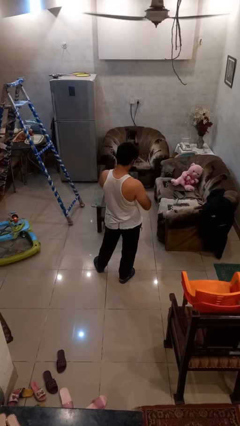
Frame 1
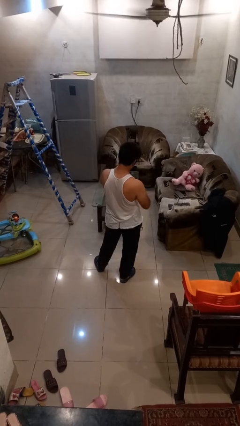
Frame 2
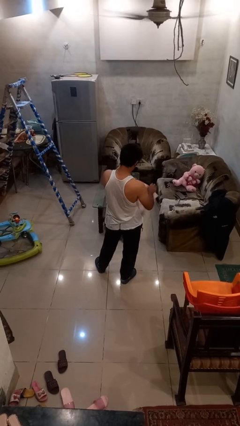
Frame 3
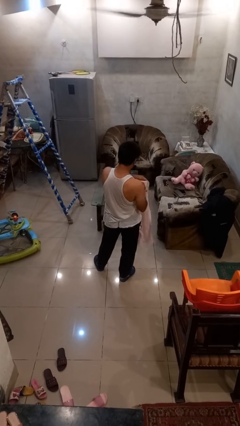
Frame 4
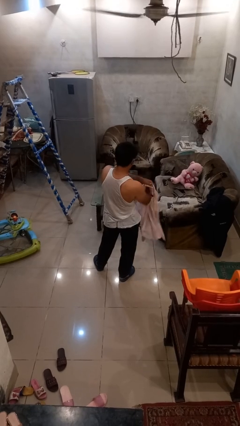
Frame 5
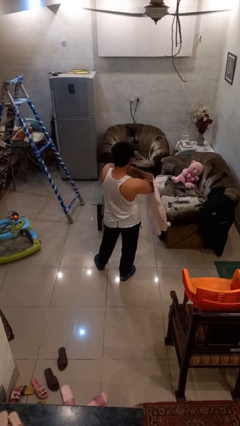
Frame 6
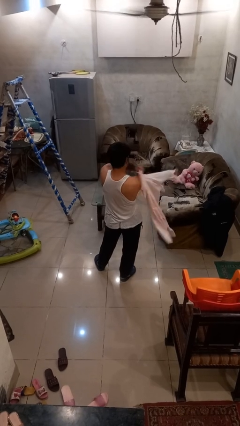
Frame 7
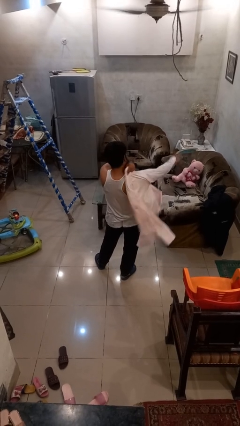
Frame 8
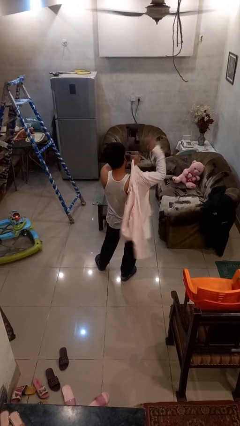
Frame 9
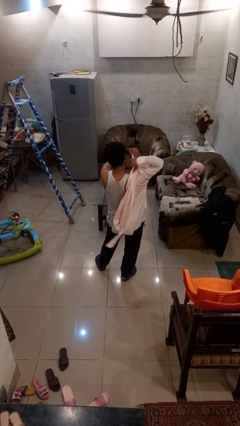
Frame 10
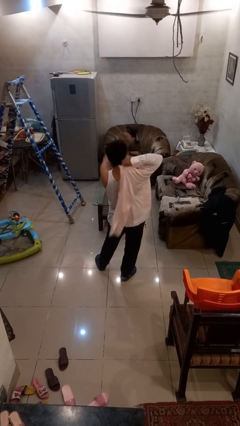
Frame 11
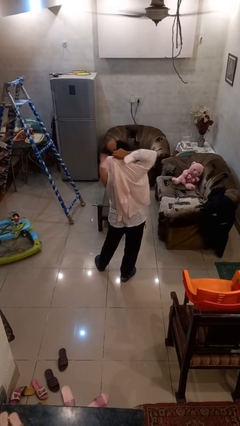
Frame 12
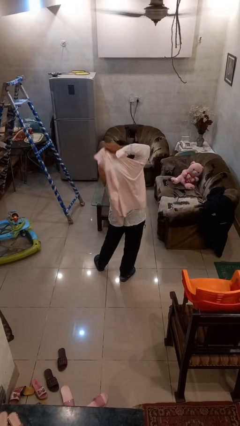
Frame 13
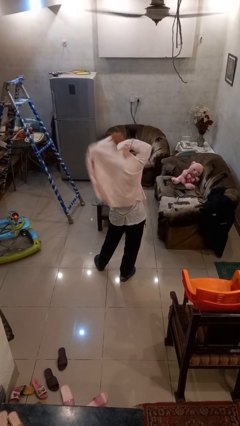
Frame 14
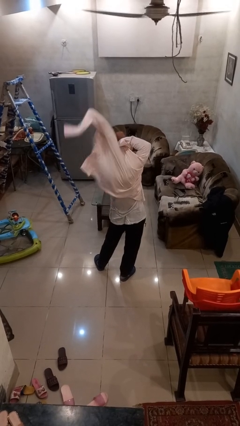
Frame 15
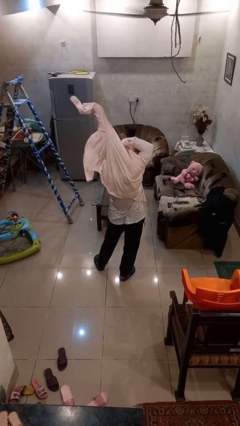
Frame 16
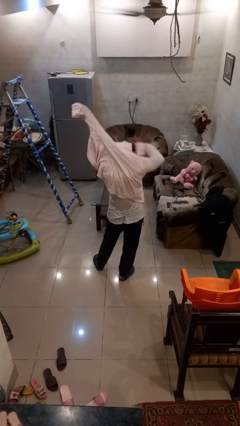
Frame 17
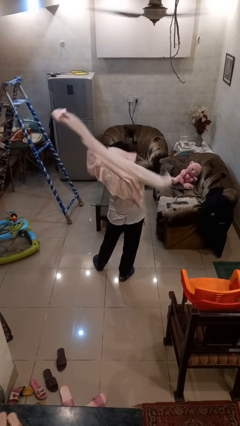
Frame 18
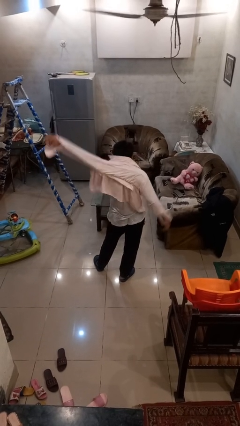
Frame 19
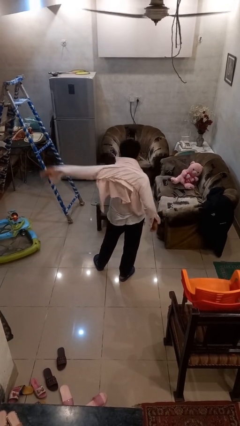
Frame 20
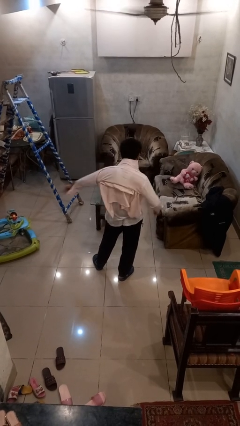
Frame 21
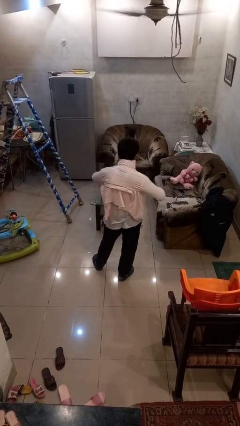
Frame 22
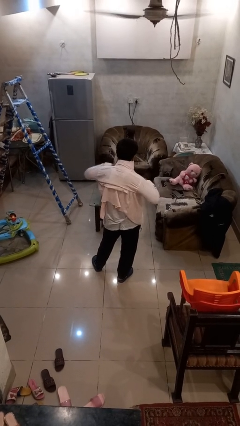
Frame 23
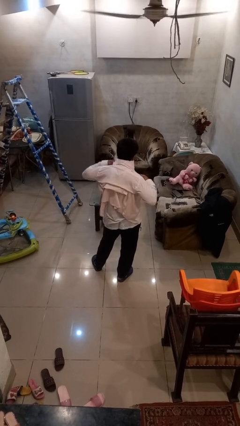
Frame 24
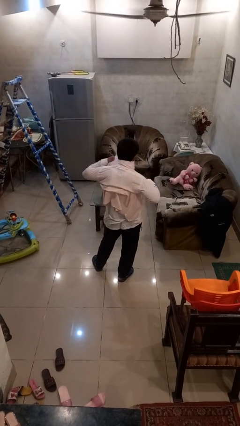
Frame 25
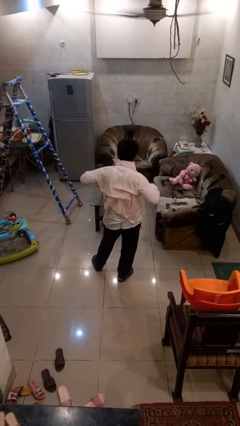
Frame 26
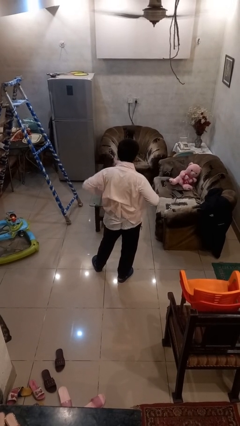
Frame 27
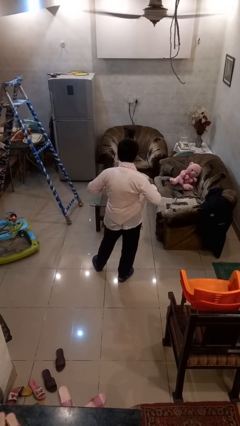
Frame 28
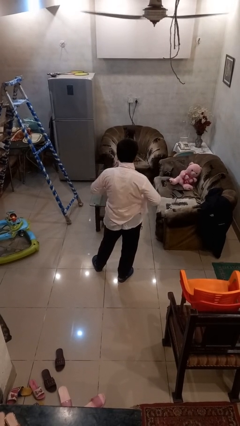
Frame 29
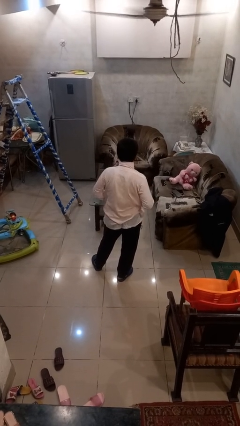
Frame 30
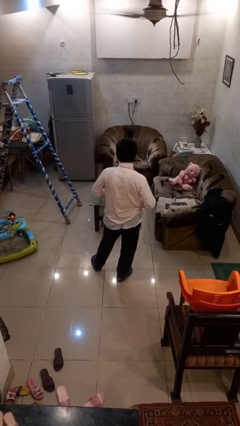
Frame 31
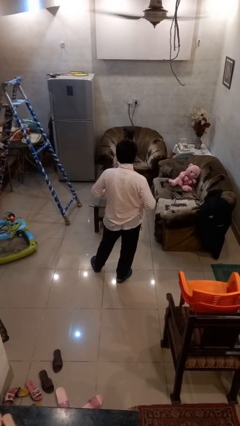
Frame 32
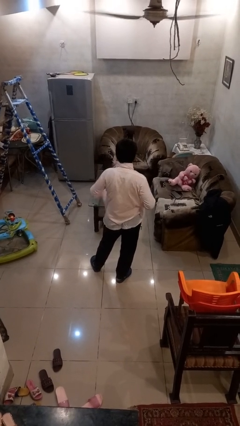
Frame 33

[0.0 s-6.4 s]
person puts on shirt

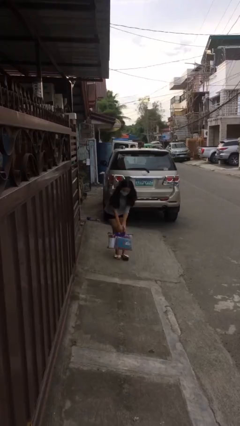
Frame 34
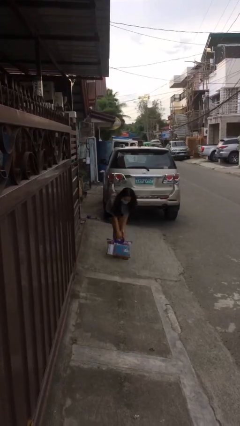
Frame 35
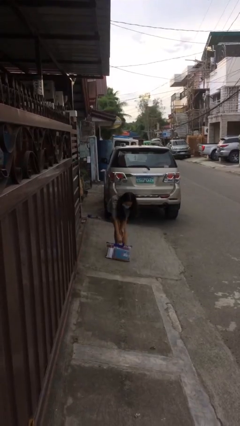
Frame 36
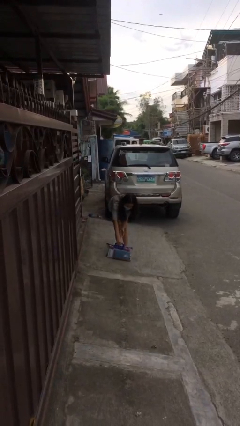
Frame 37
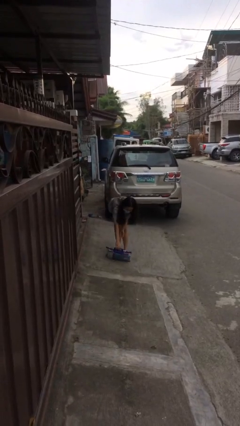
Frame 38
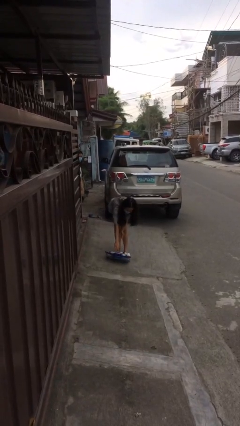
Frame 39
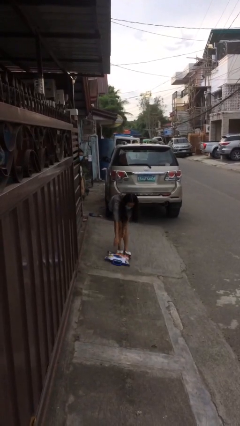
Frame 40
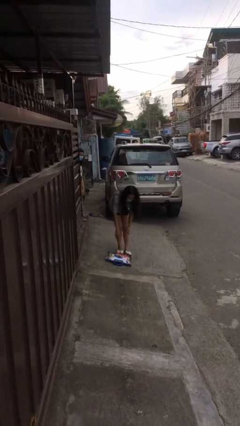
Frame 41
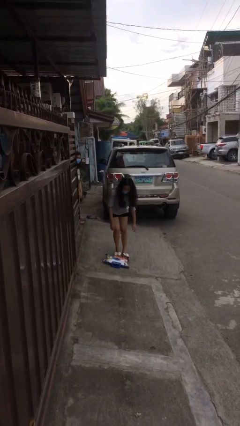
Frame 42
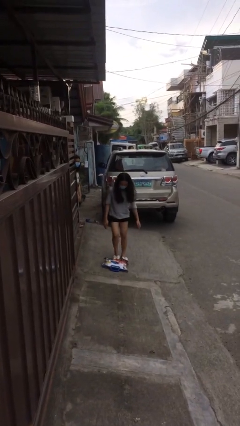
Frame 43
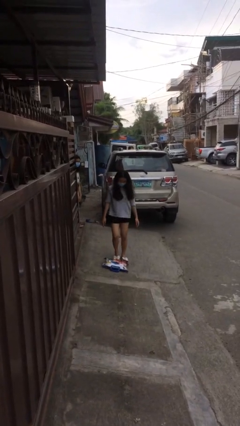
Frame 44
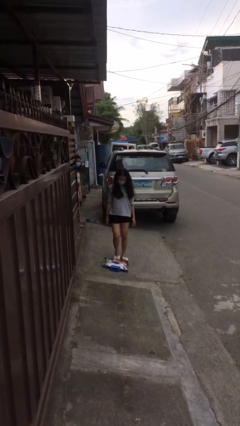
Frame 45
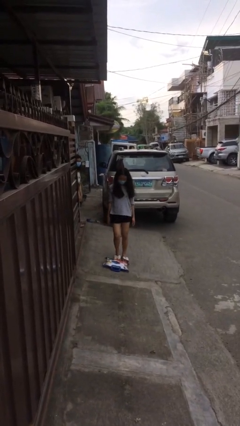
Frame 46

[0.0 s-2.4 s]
person puts down object on floor

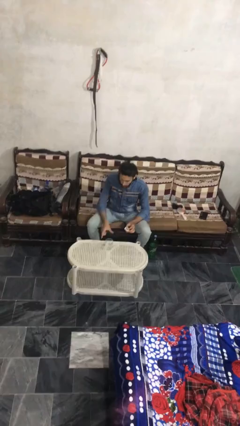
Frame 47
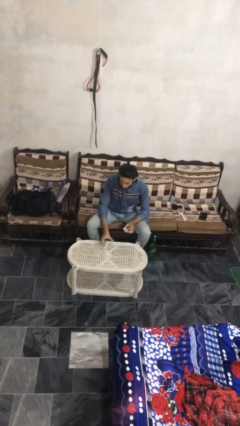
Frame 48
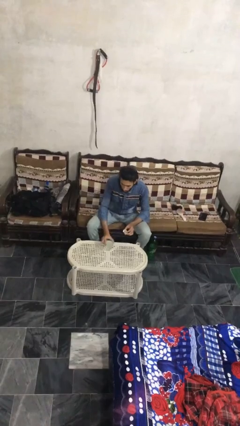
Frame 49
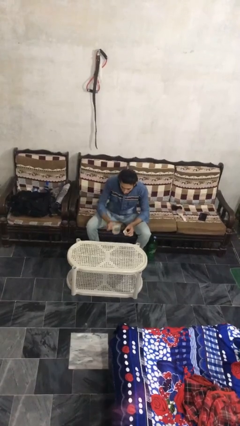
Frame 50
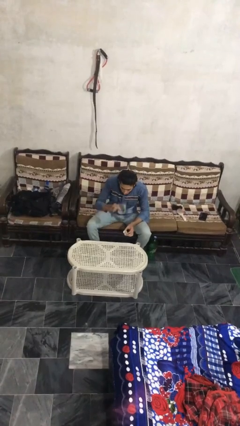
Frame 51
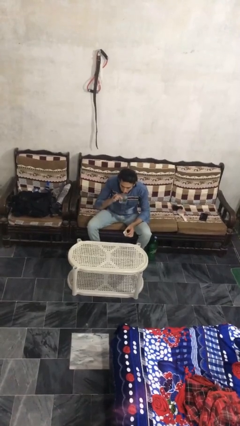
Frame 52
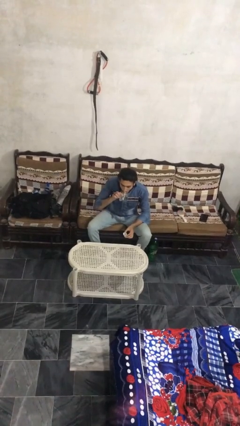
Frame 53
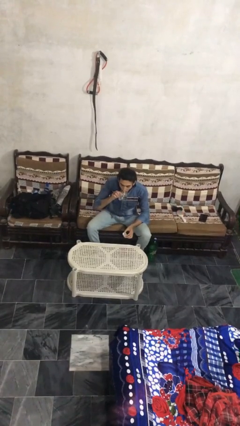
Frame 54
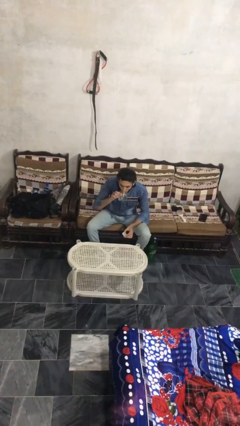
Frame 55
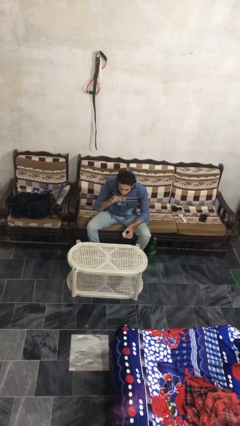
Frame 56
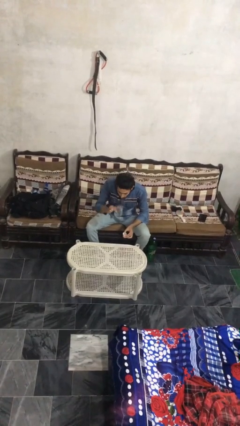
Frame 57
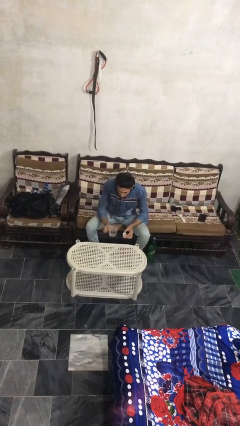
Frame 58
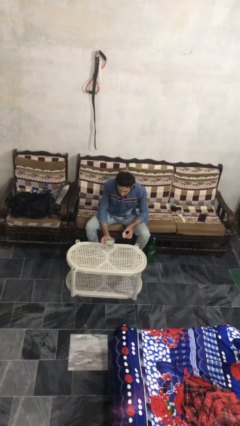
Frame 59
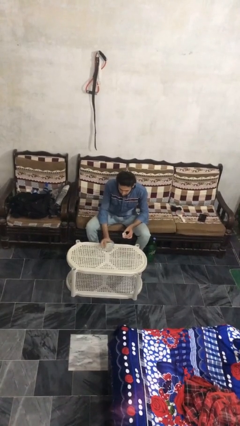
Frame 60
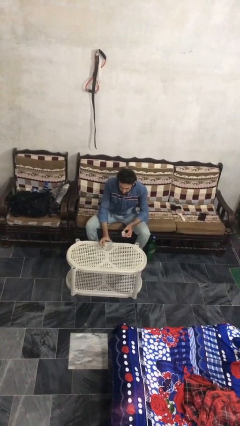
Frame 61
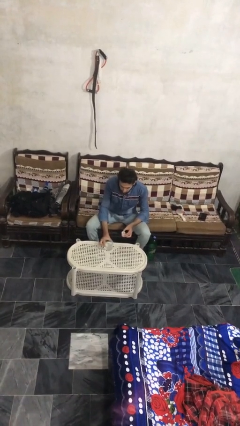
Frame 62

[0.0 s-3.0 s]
person drinks from cup

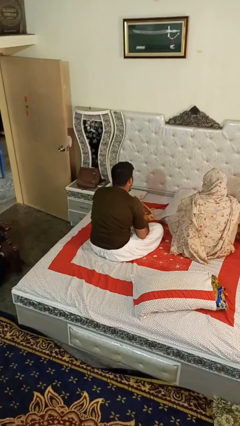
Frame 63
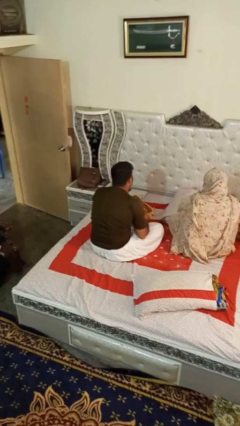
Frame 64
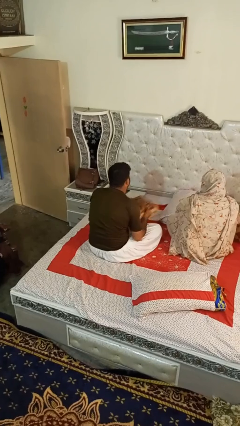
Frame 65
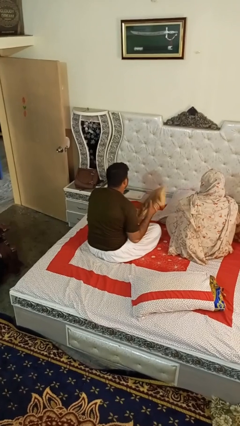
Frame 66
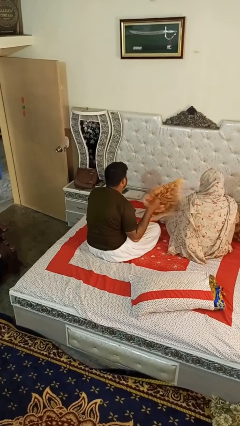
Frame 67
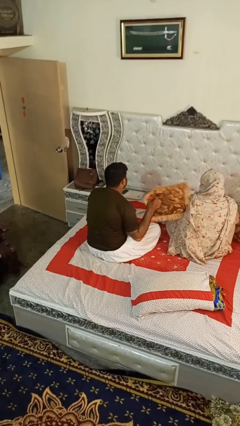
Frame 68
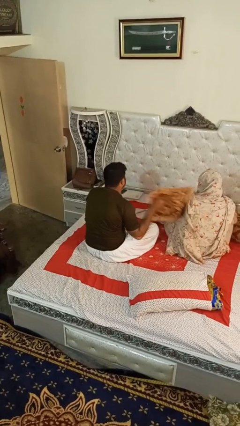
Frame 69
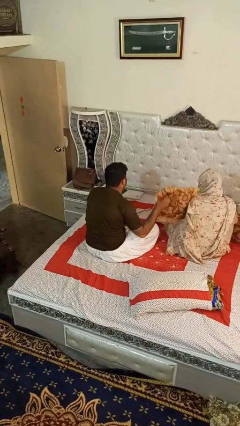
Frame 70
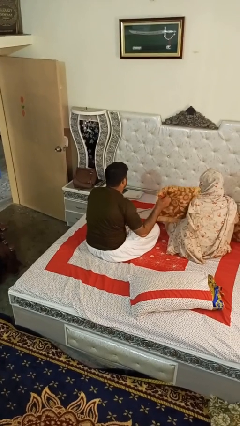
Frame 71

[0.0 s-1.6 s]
person hits person with pillow

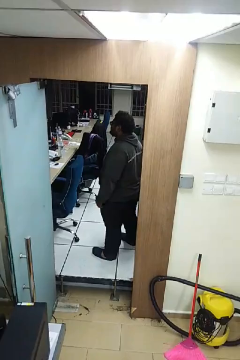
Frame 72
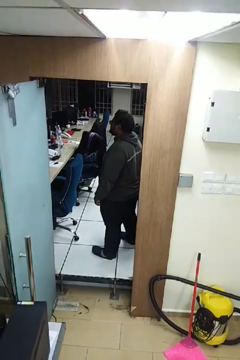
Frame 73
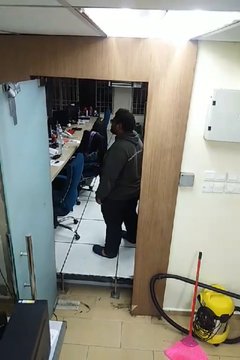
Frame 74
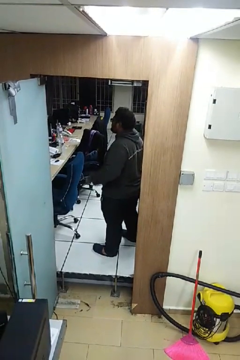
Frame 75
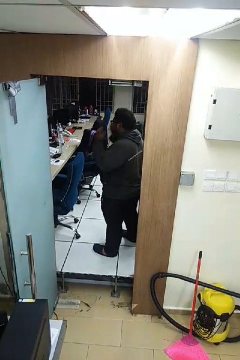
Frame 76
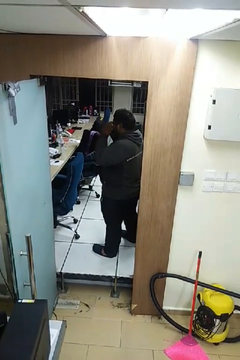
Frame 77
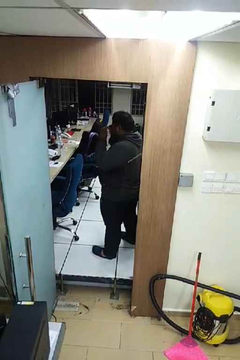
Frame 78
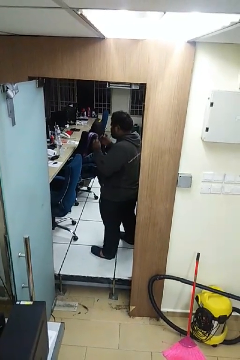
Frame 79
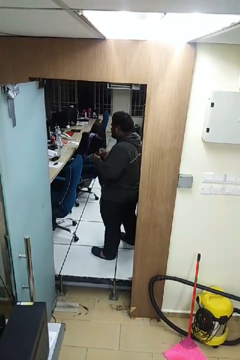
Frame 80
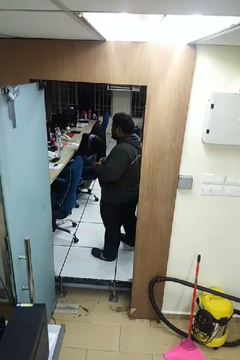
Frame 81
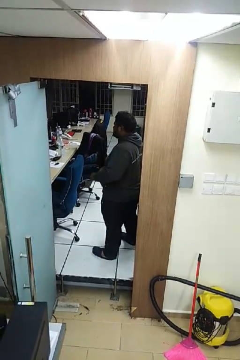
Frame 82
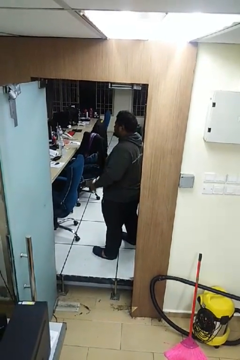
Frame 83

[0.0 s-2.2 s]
person takes off glasses

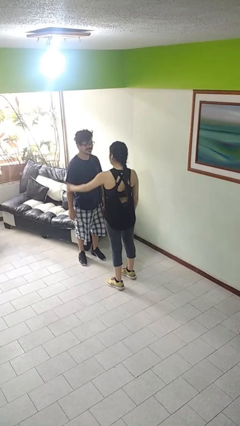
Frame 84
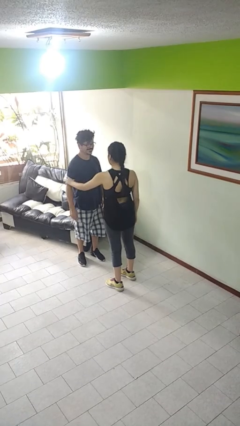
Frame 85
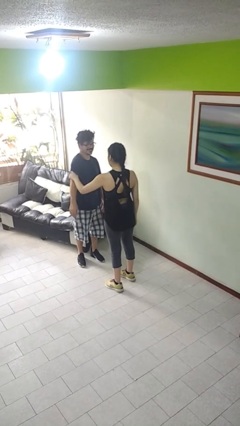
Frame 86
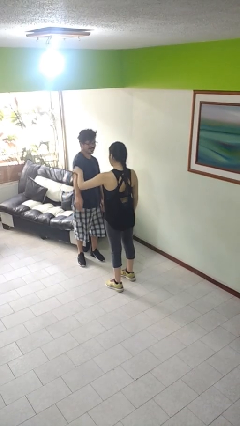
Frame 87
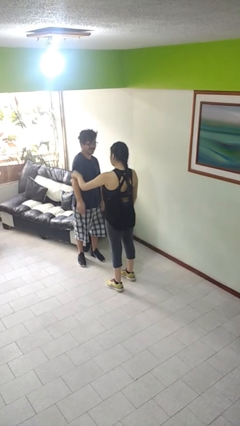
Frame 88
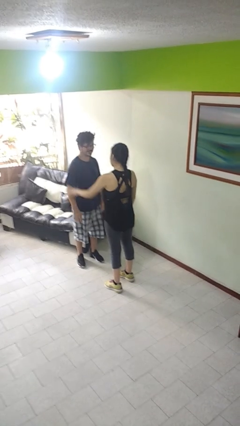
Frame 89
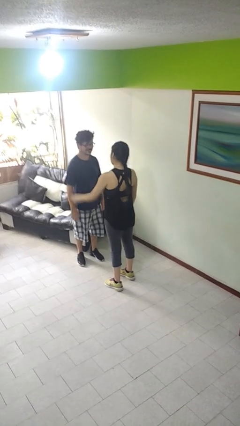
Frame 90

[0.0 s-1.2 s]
person grabs person by bicep

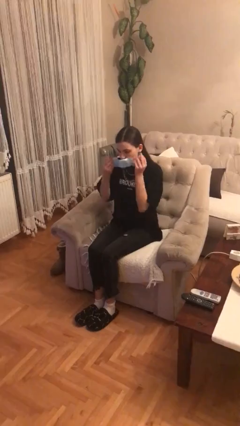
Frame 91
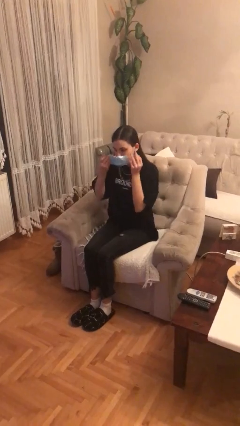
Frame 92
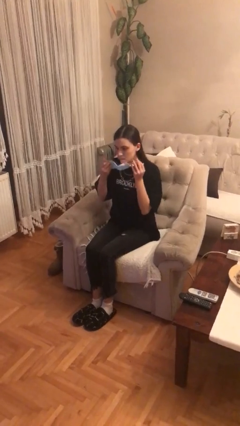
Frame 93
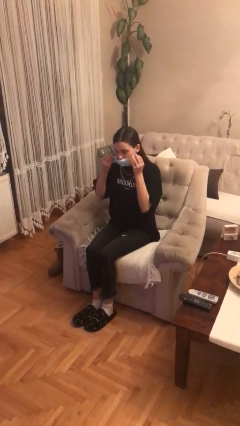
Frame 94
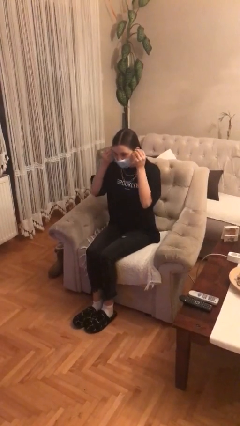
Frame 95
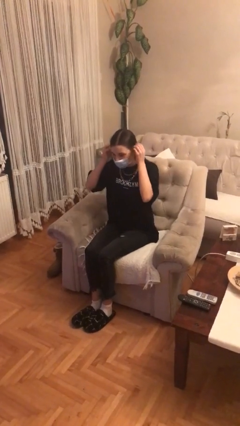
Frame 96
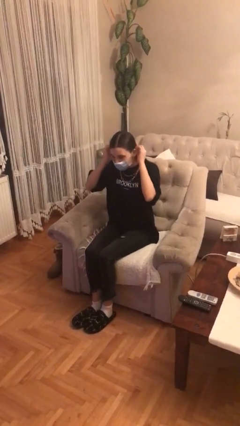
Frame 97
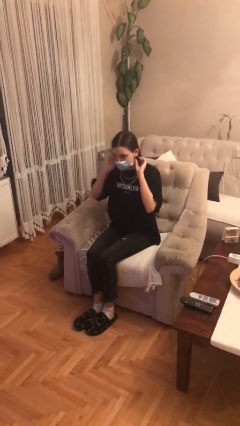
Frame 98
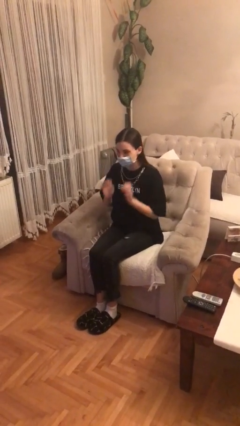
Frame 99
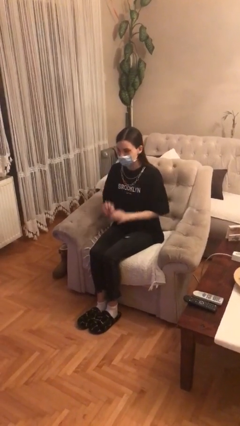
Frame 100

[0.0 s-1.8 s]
person puts on facemask
